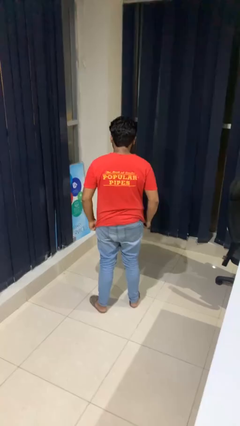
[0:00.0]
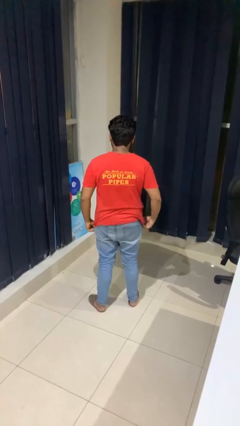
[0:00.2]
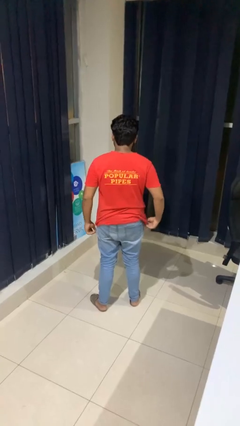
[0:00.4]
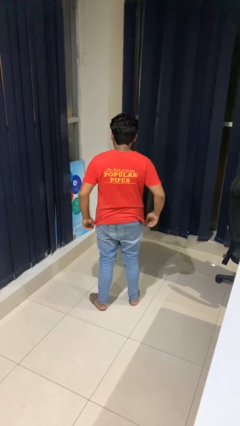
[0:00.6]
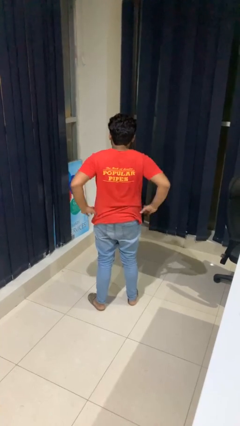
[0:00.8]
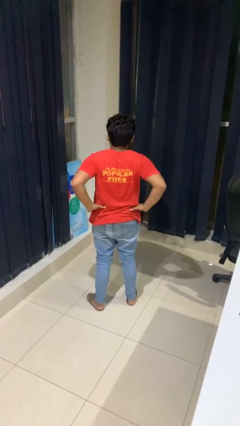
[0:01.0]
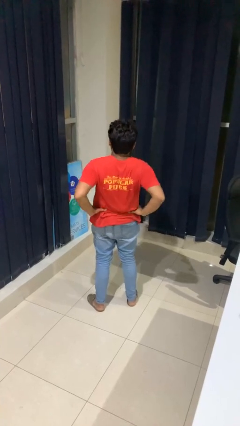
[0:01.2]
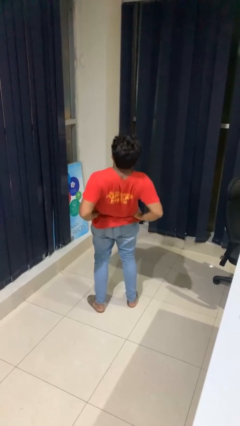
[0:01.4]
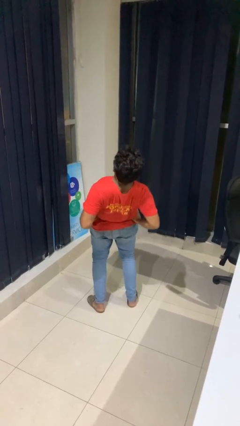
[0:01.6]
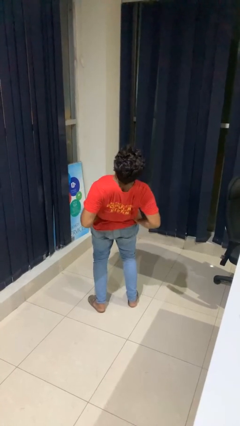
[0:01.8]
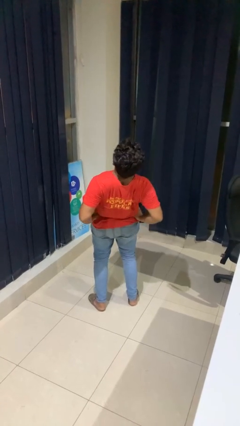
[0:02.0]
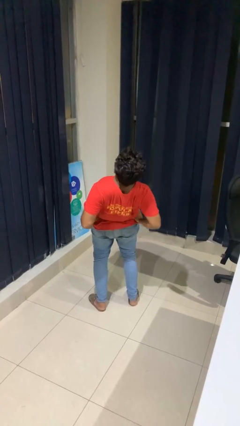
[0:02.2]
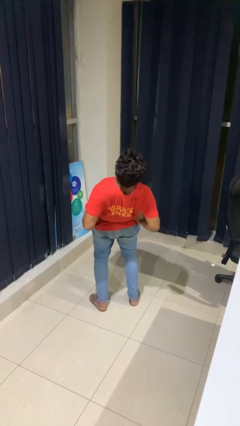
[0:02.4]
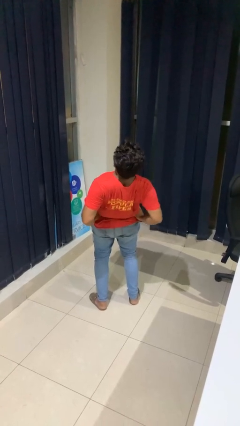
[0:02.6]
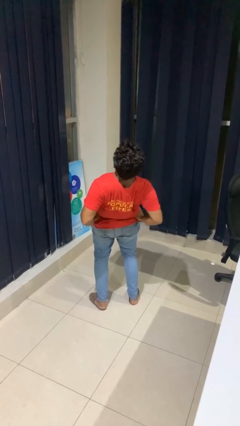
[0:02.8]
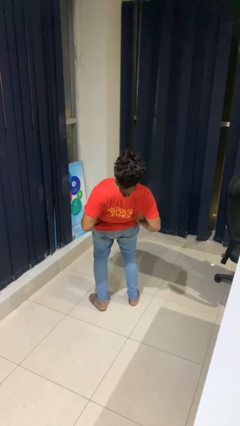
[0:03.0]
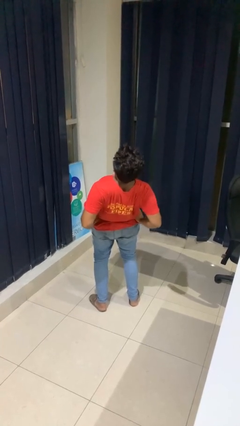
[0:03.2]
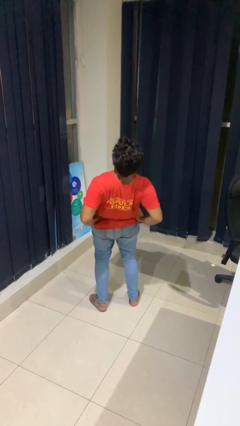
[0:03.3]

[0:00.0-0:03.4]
person stretches back

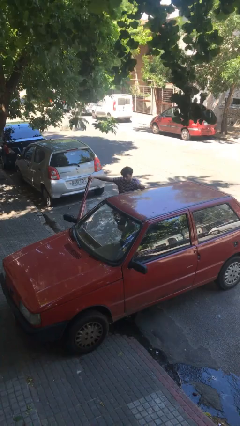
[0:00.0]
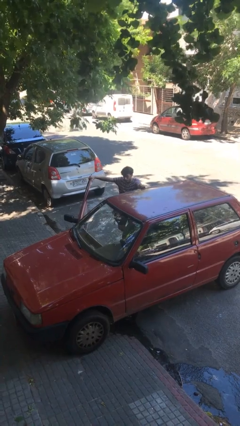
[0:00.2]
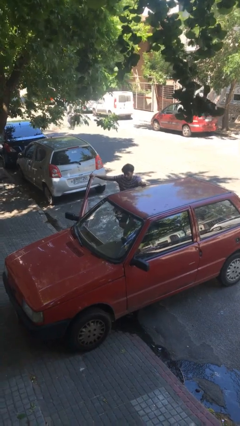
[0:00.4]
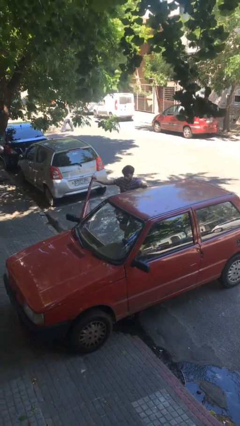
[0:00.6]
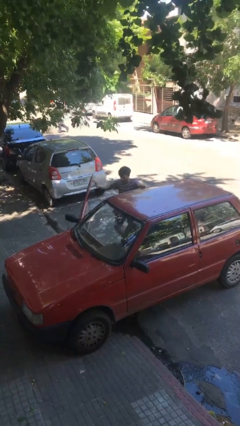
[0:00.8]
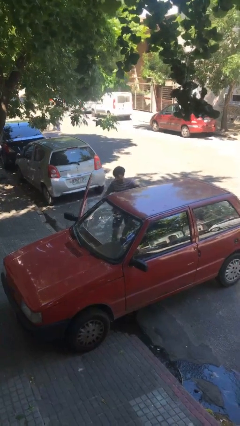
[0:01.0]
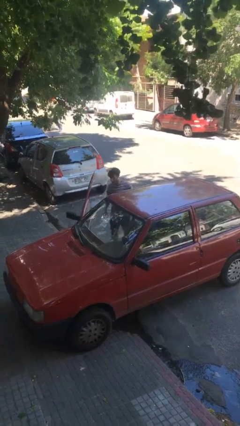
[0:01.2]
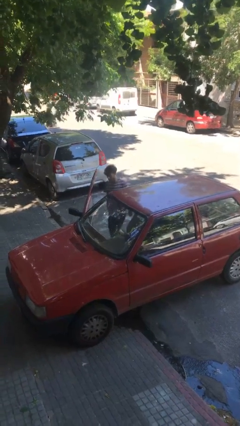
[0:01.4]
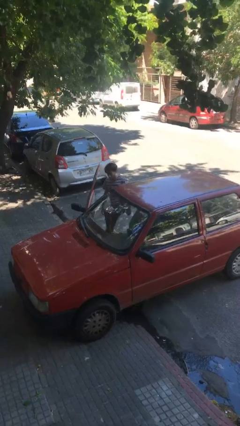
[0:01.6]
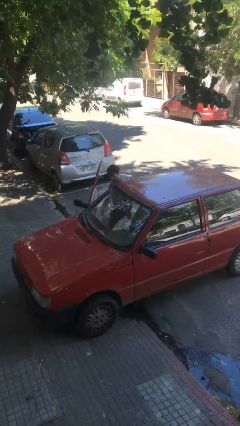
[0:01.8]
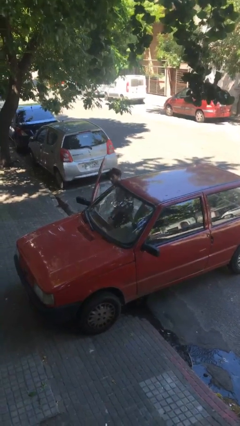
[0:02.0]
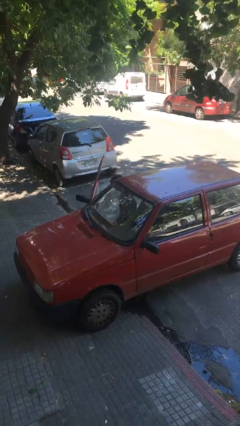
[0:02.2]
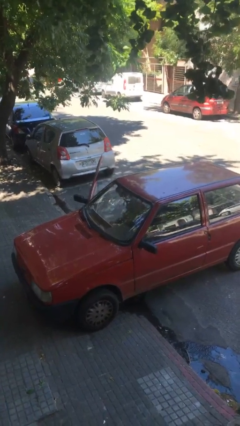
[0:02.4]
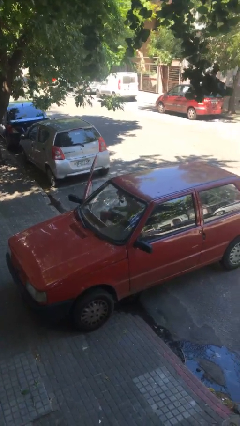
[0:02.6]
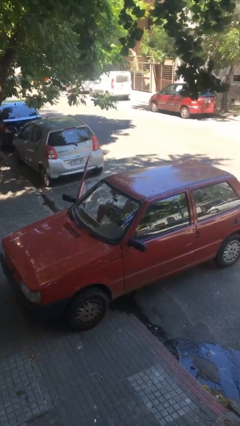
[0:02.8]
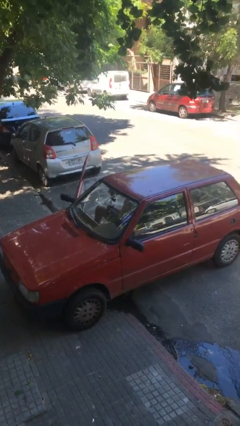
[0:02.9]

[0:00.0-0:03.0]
person enters car

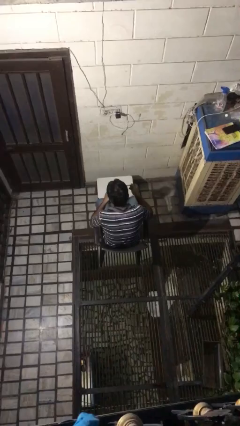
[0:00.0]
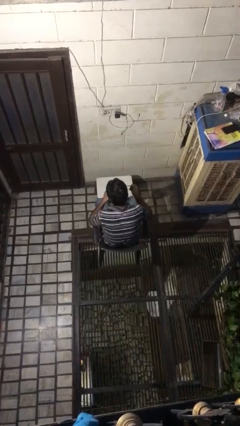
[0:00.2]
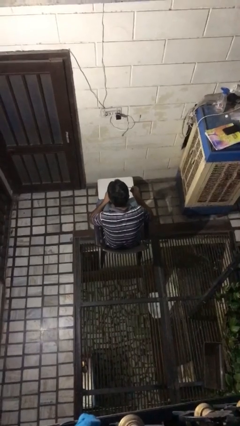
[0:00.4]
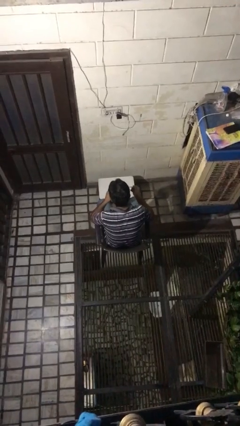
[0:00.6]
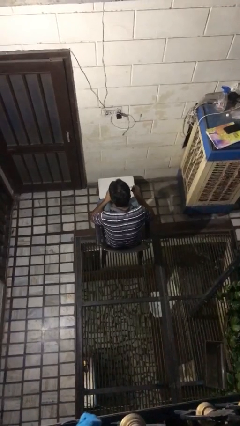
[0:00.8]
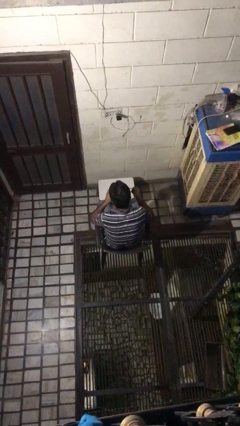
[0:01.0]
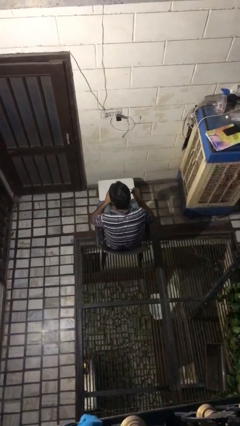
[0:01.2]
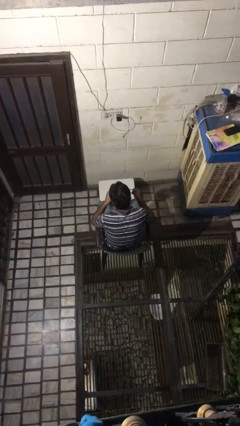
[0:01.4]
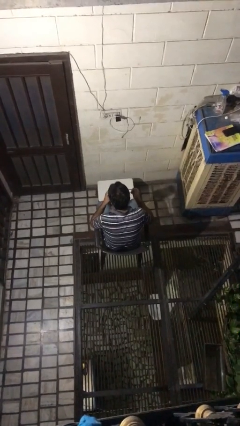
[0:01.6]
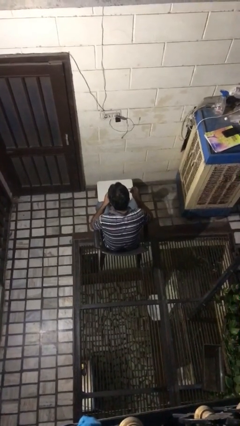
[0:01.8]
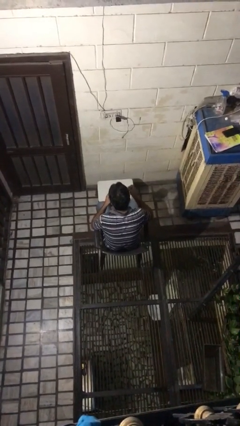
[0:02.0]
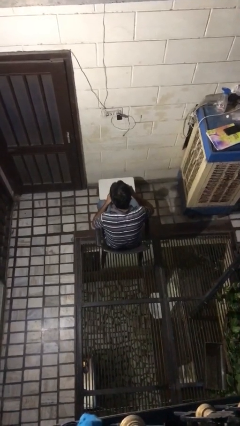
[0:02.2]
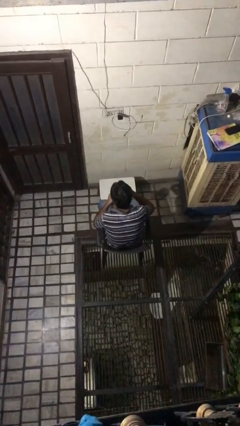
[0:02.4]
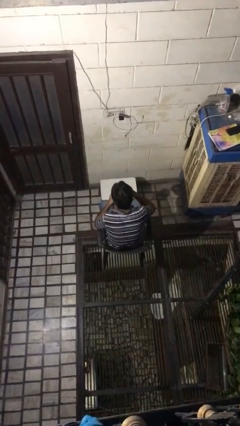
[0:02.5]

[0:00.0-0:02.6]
person drinks from mug

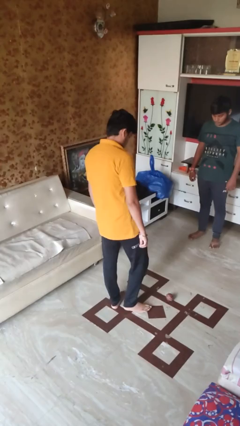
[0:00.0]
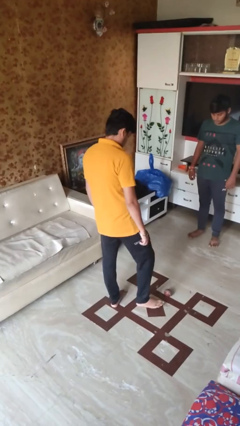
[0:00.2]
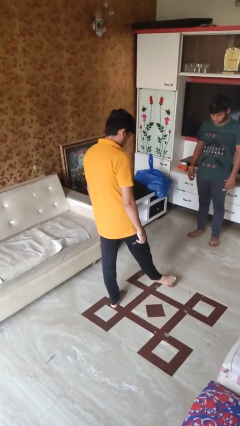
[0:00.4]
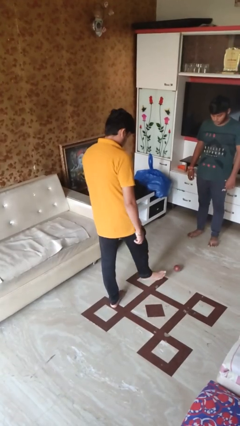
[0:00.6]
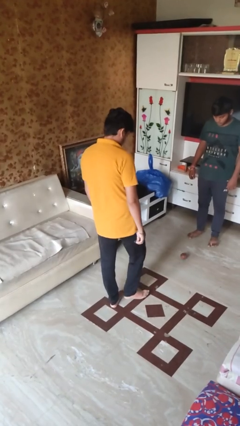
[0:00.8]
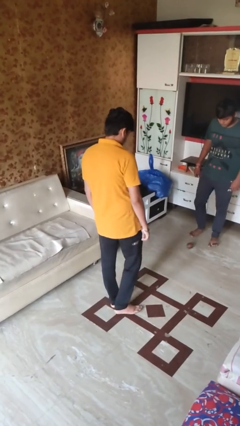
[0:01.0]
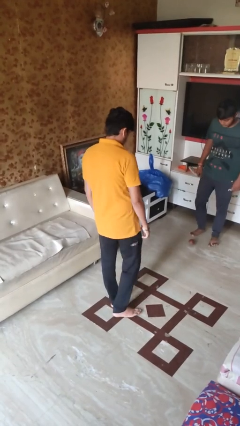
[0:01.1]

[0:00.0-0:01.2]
person kicks object to person
